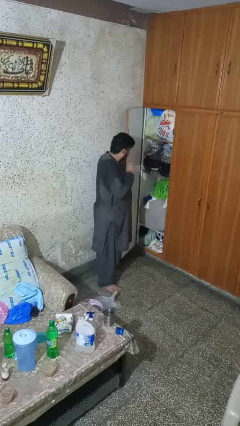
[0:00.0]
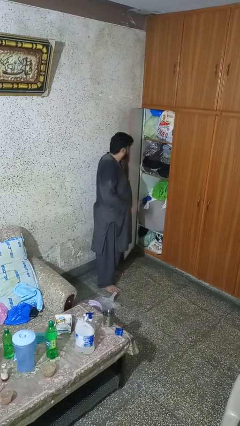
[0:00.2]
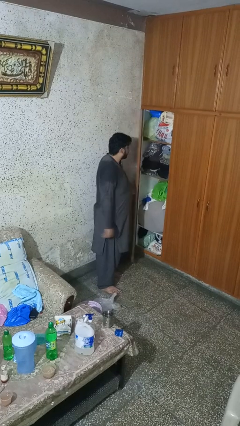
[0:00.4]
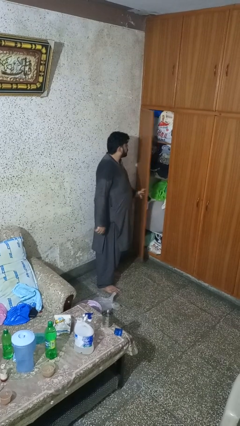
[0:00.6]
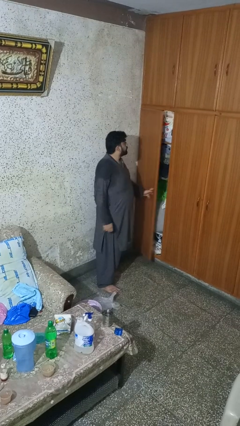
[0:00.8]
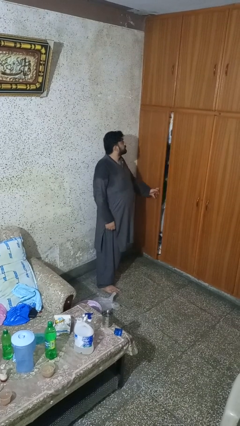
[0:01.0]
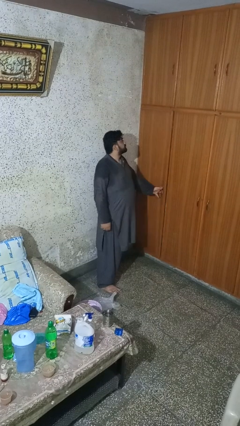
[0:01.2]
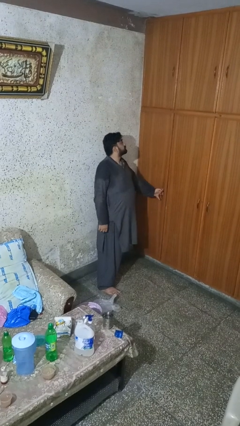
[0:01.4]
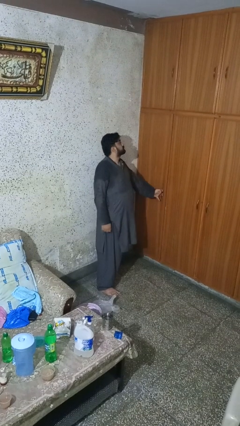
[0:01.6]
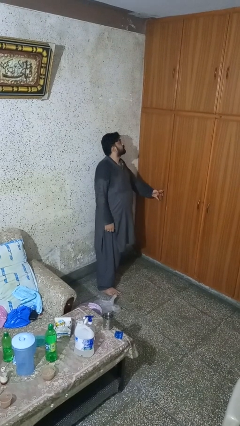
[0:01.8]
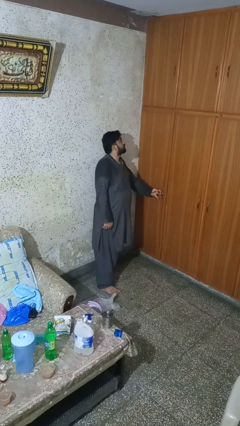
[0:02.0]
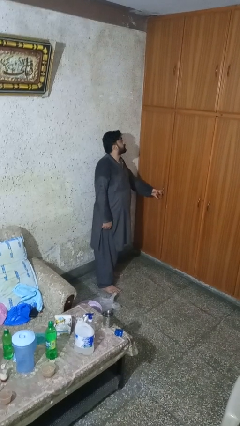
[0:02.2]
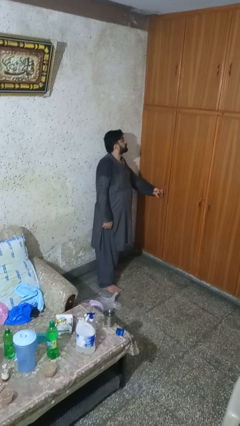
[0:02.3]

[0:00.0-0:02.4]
person closes closet door

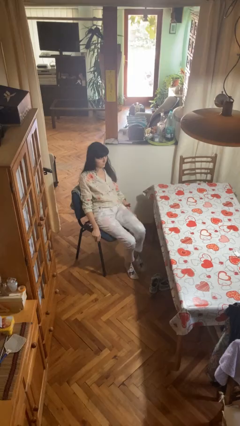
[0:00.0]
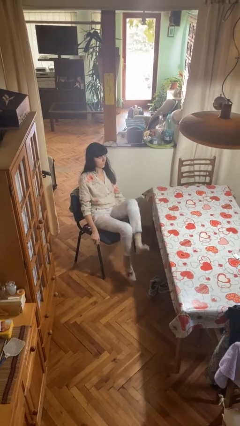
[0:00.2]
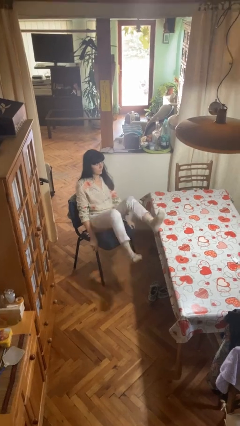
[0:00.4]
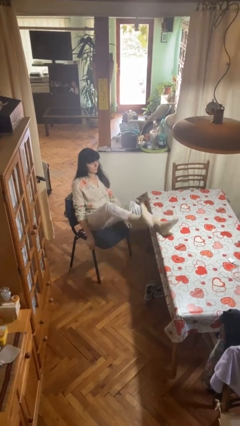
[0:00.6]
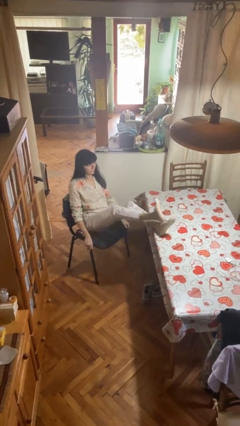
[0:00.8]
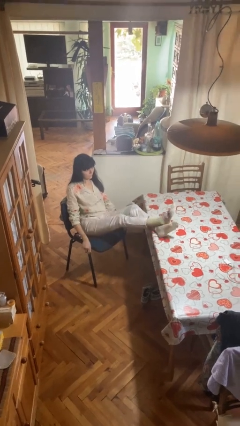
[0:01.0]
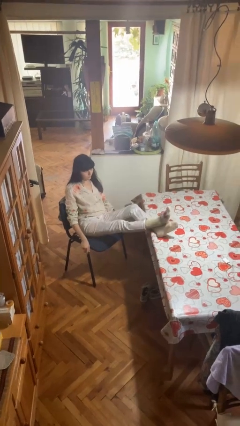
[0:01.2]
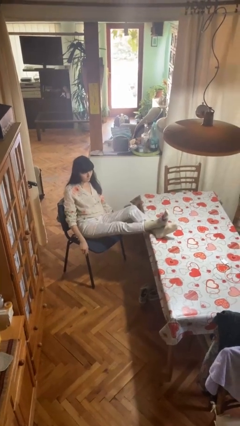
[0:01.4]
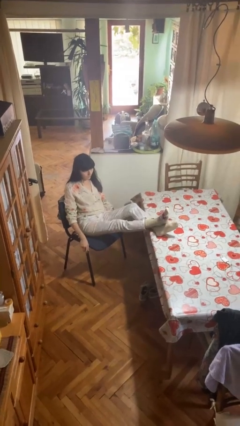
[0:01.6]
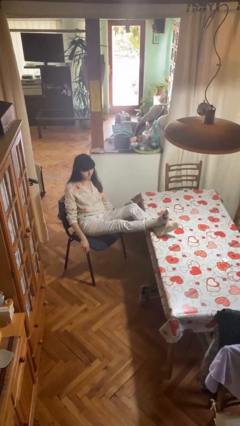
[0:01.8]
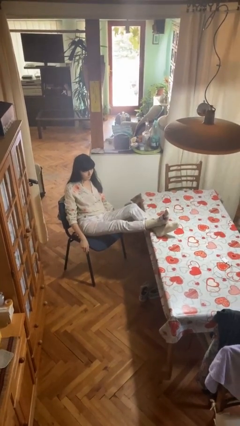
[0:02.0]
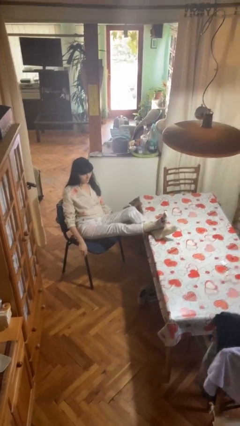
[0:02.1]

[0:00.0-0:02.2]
person puts feet up

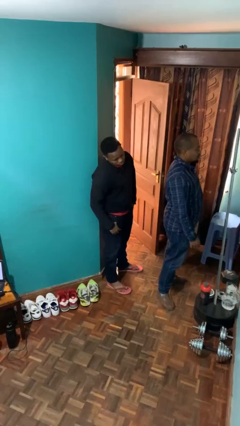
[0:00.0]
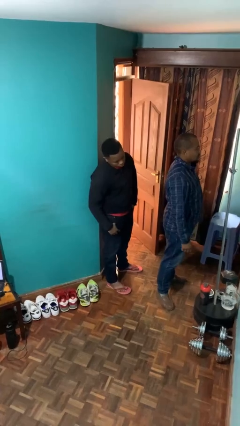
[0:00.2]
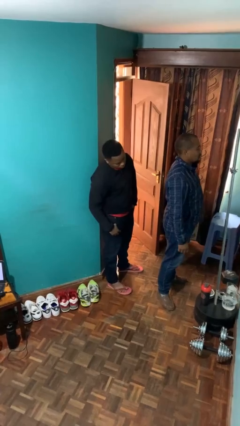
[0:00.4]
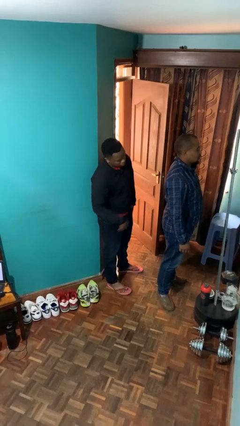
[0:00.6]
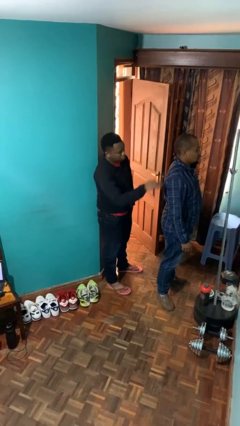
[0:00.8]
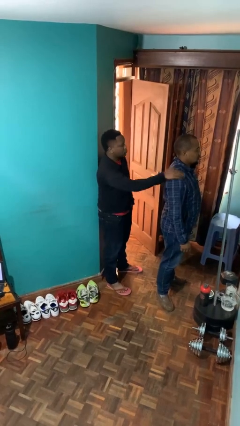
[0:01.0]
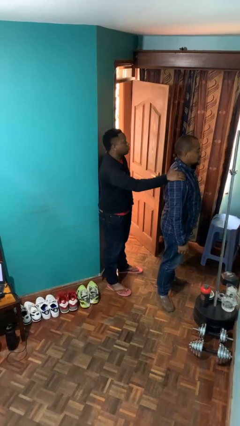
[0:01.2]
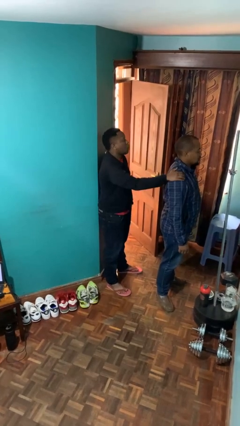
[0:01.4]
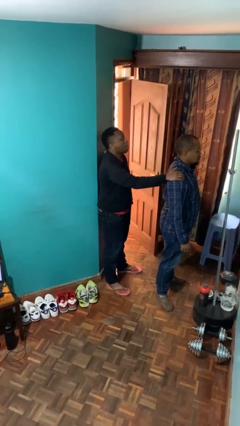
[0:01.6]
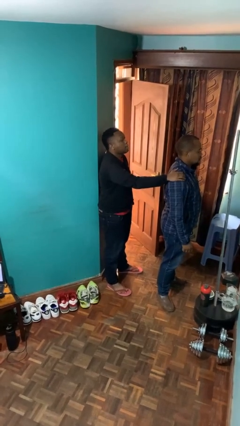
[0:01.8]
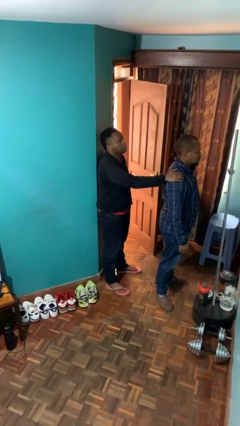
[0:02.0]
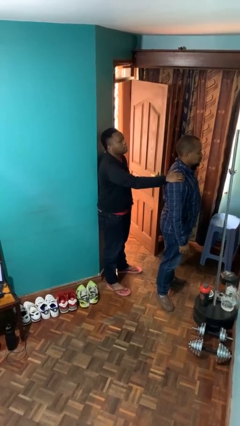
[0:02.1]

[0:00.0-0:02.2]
person grabs person by shoulder

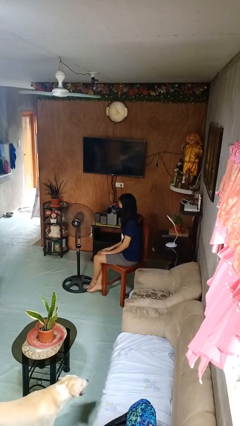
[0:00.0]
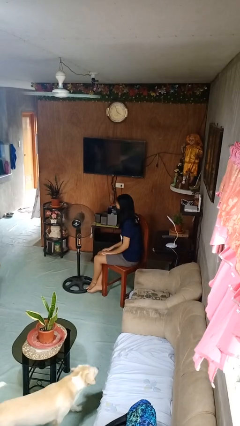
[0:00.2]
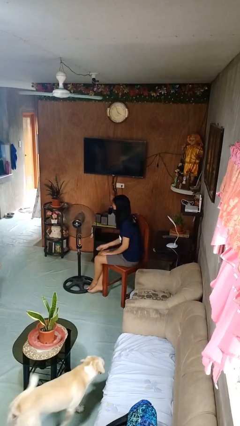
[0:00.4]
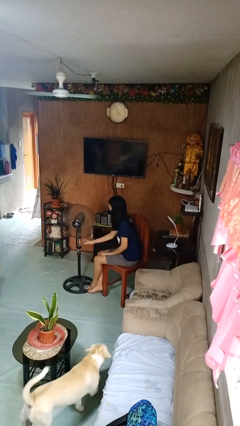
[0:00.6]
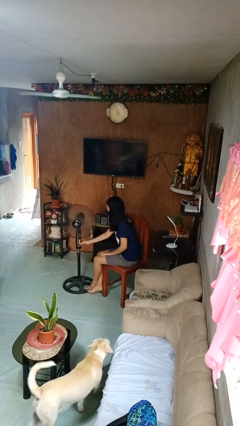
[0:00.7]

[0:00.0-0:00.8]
person turns on fan

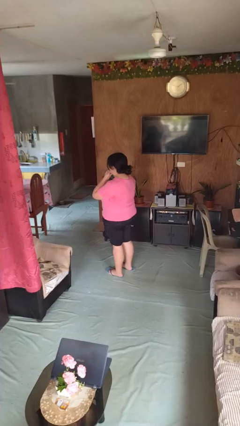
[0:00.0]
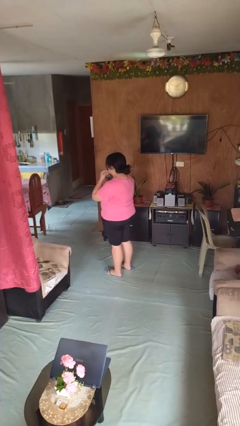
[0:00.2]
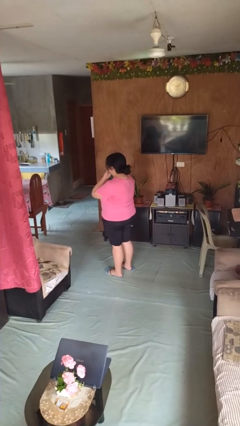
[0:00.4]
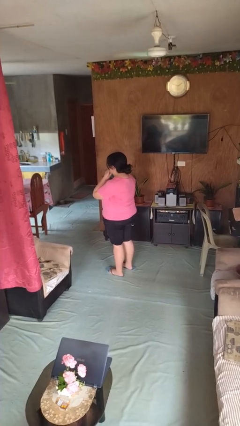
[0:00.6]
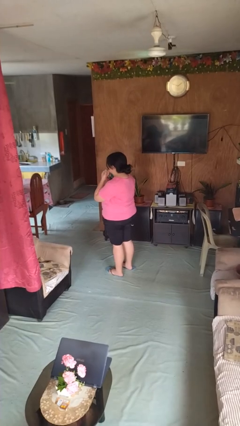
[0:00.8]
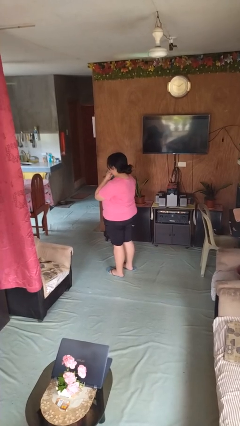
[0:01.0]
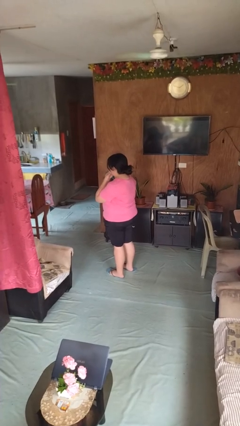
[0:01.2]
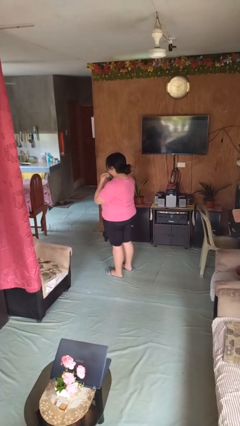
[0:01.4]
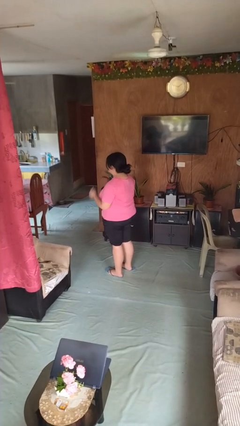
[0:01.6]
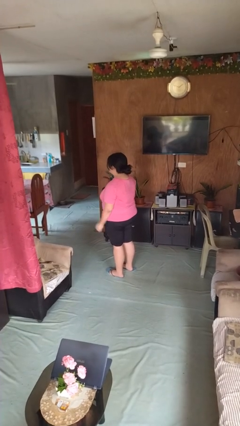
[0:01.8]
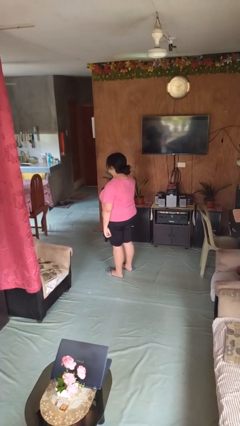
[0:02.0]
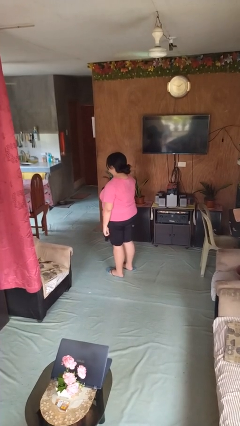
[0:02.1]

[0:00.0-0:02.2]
person strokes chin

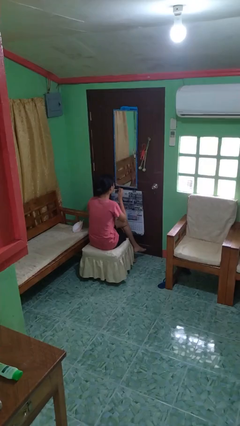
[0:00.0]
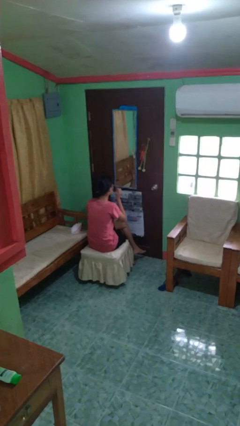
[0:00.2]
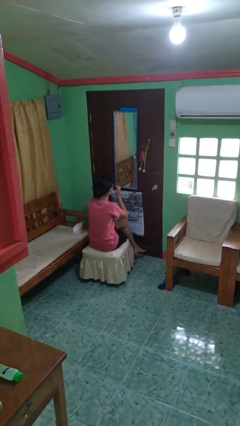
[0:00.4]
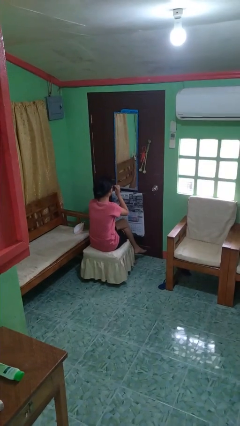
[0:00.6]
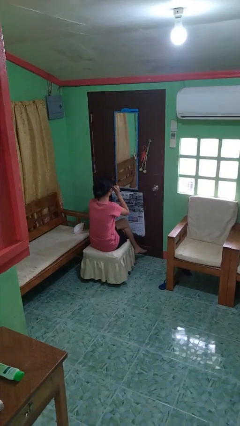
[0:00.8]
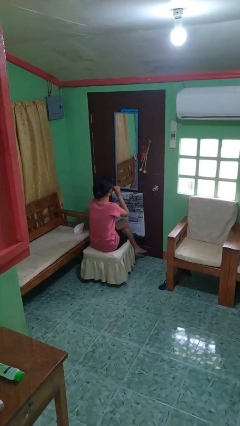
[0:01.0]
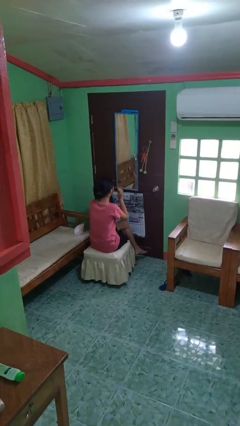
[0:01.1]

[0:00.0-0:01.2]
person puts on sunglasses

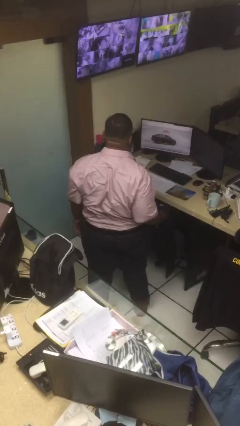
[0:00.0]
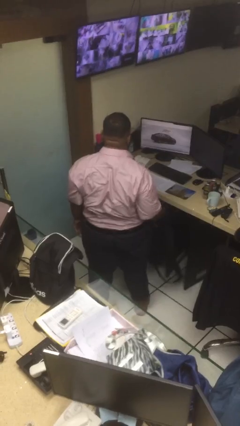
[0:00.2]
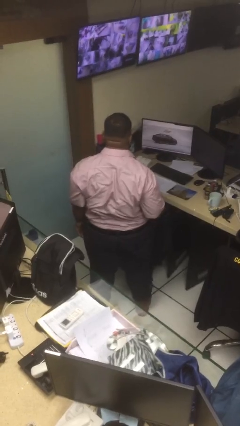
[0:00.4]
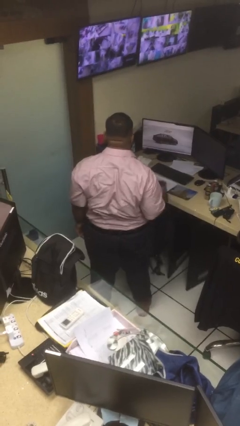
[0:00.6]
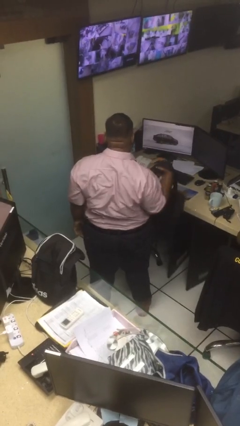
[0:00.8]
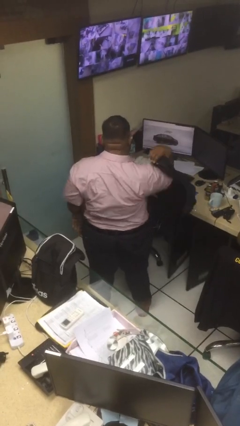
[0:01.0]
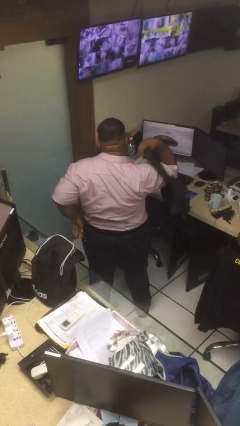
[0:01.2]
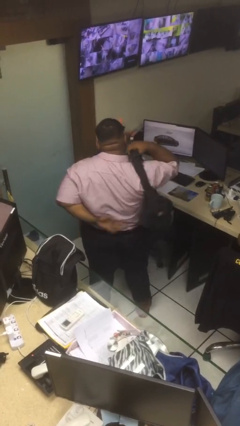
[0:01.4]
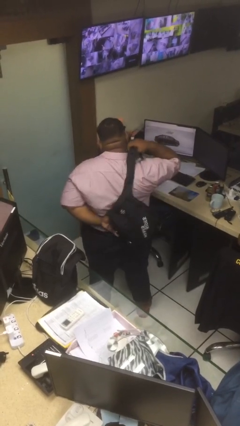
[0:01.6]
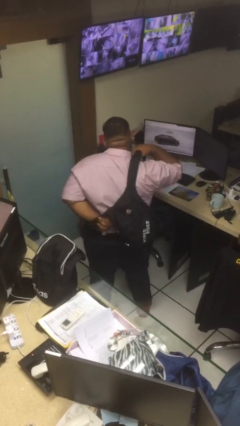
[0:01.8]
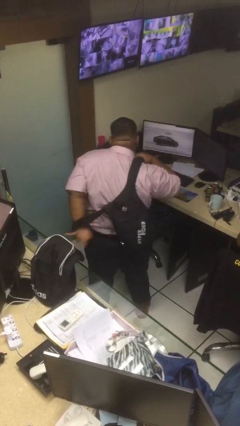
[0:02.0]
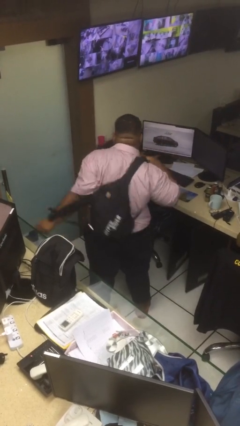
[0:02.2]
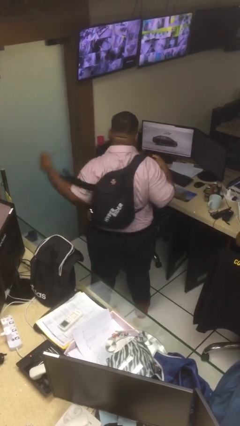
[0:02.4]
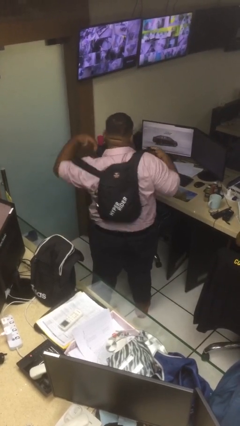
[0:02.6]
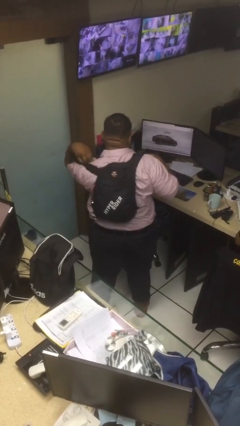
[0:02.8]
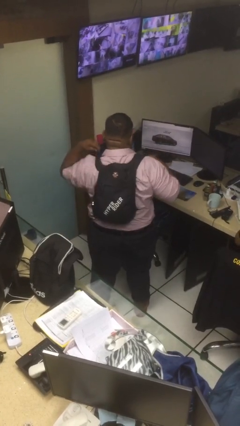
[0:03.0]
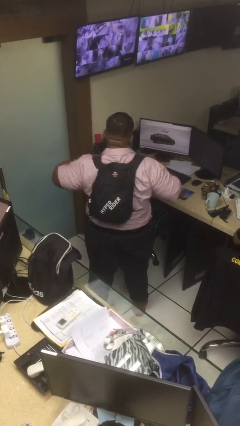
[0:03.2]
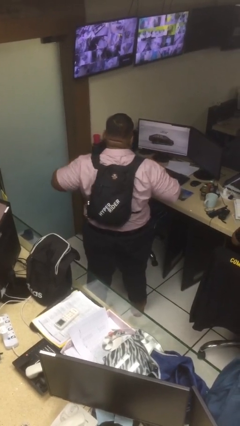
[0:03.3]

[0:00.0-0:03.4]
person puts on backpack

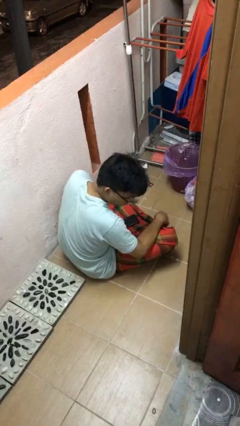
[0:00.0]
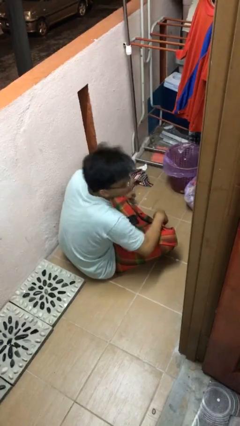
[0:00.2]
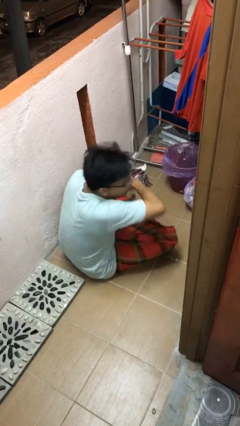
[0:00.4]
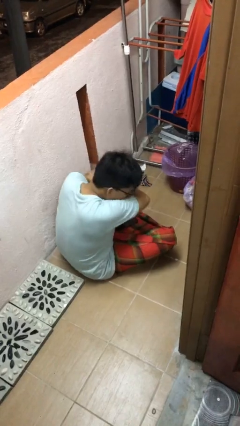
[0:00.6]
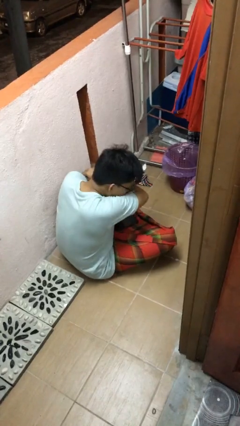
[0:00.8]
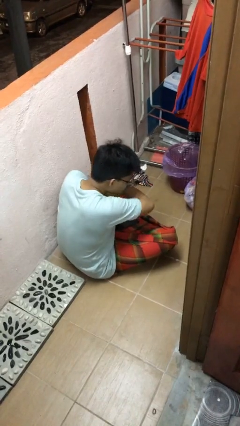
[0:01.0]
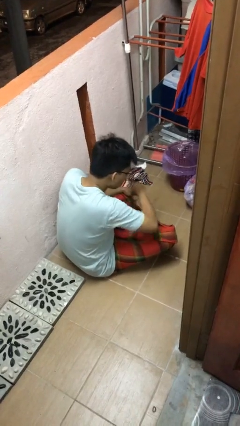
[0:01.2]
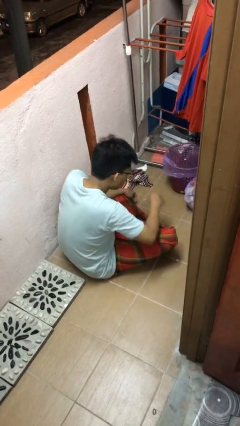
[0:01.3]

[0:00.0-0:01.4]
person sneezes into arm

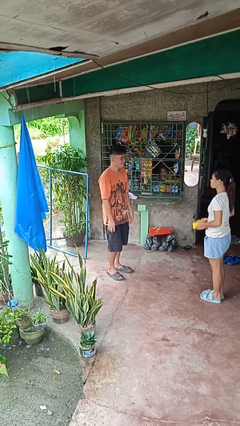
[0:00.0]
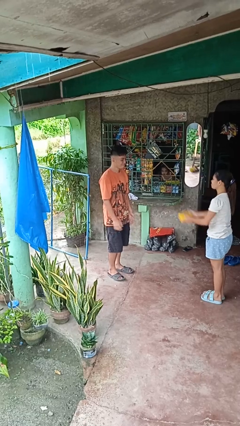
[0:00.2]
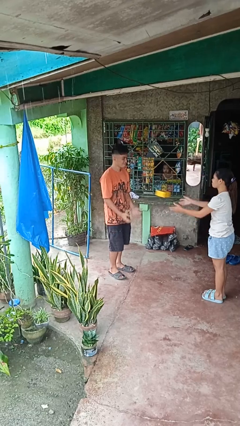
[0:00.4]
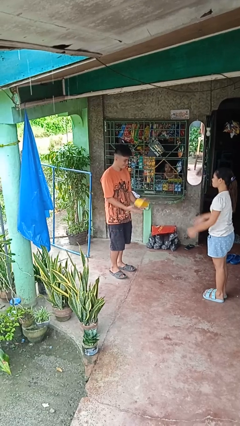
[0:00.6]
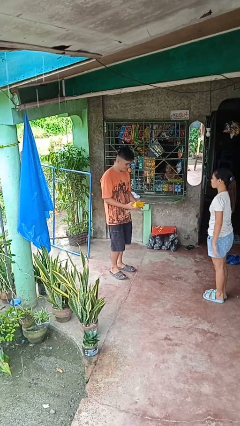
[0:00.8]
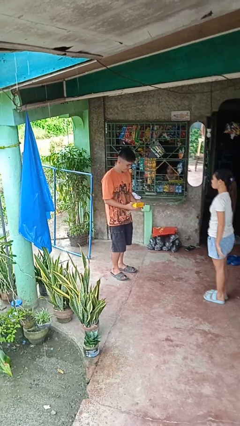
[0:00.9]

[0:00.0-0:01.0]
person catches object from person
